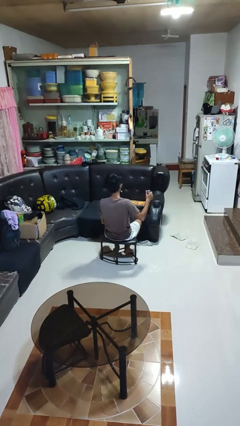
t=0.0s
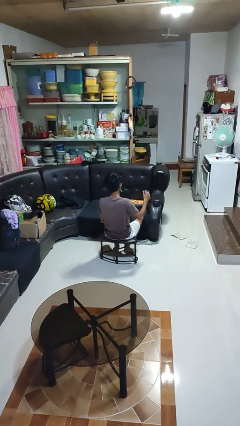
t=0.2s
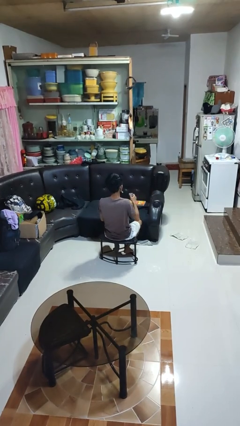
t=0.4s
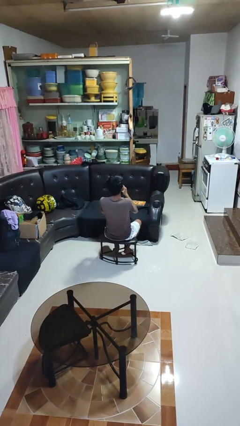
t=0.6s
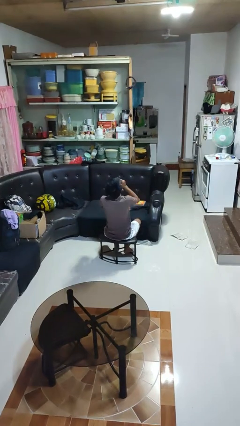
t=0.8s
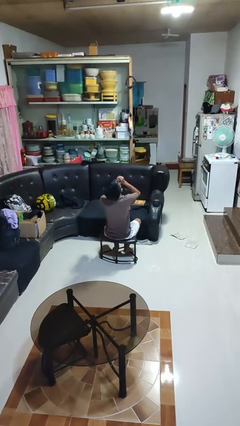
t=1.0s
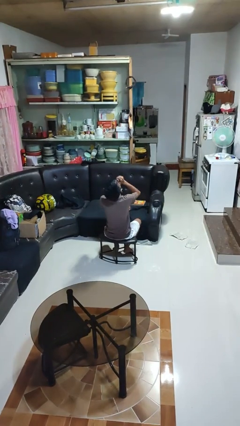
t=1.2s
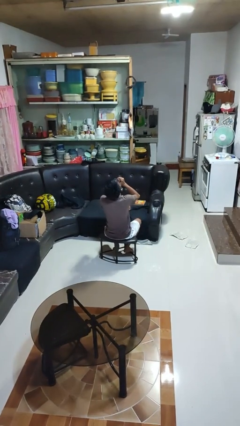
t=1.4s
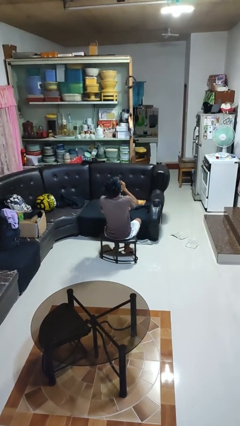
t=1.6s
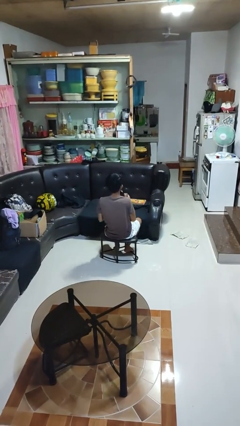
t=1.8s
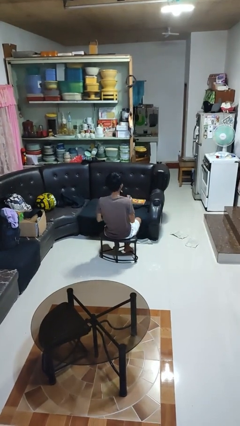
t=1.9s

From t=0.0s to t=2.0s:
person drinks from beverage can

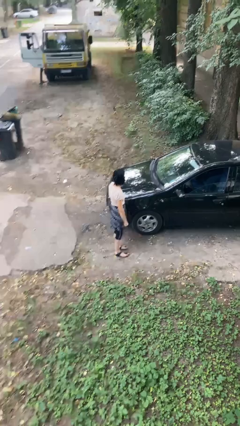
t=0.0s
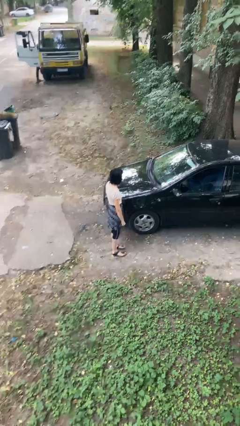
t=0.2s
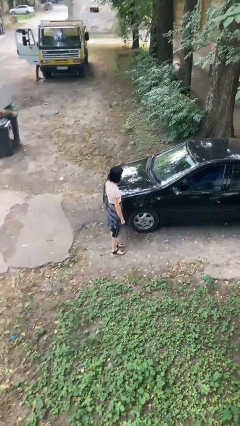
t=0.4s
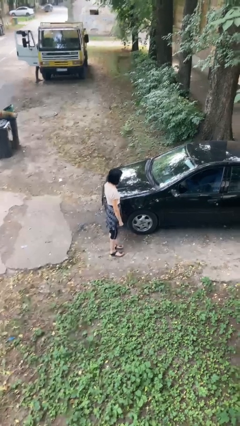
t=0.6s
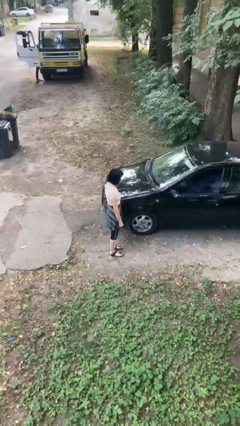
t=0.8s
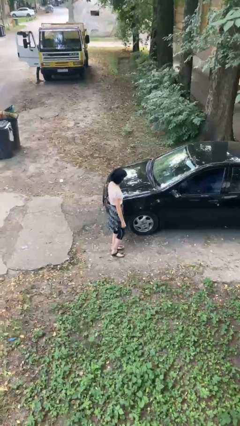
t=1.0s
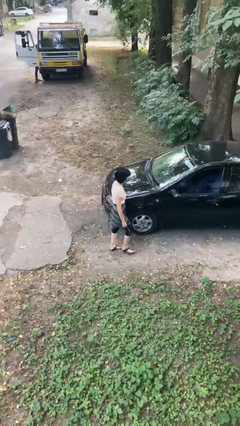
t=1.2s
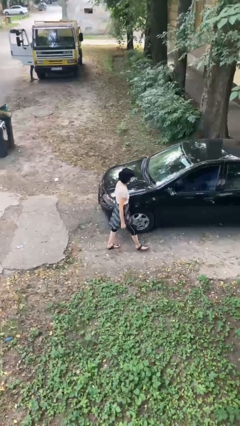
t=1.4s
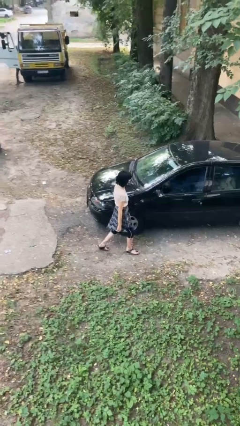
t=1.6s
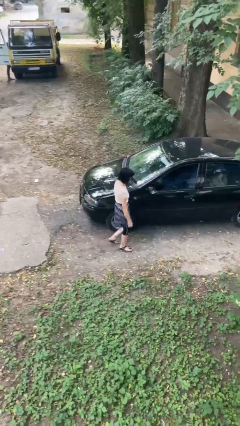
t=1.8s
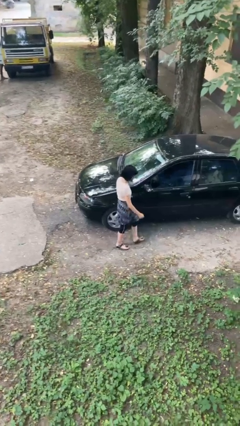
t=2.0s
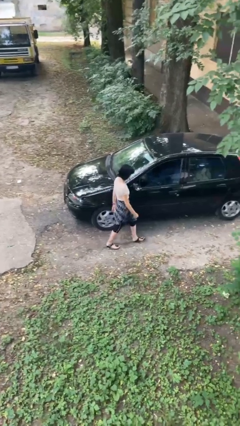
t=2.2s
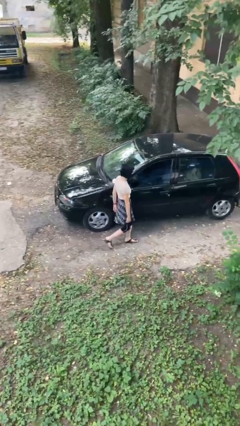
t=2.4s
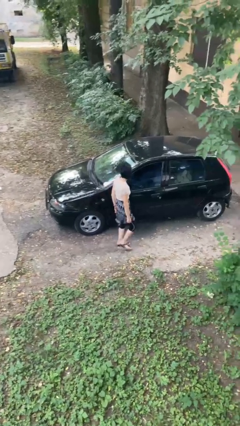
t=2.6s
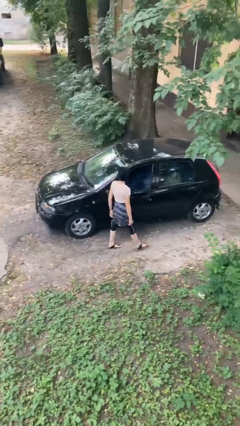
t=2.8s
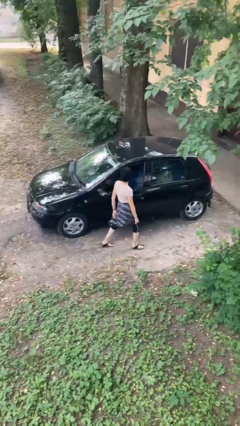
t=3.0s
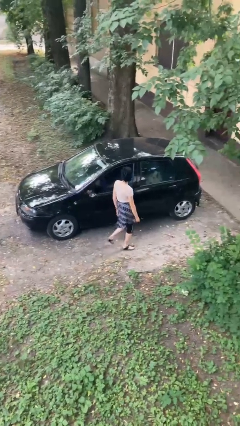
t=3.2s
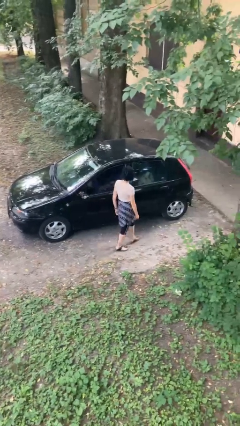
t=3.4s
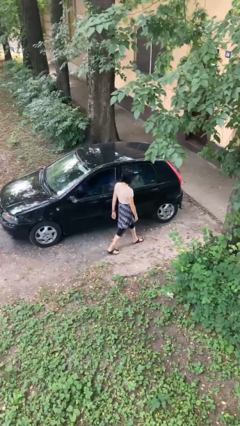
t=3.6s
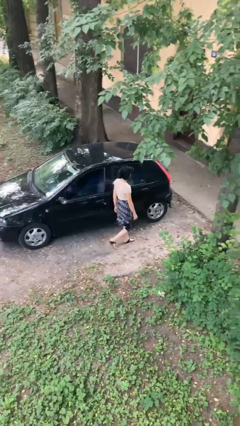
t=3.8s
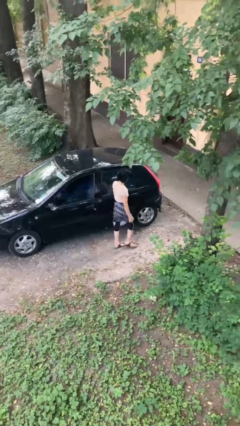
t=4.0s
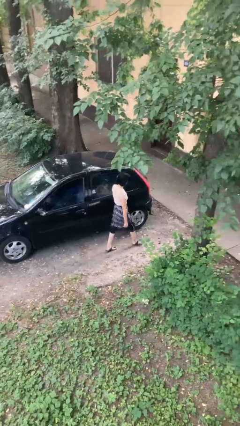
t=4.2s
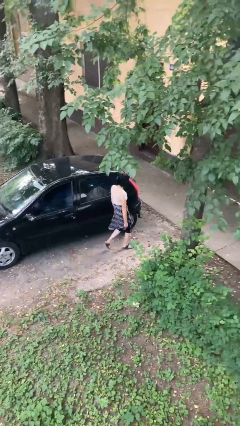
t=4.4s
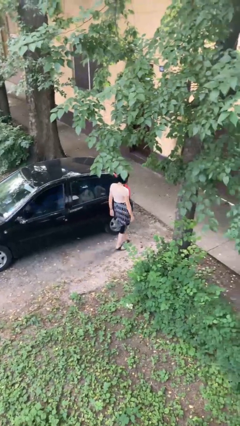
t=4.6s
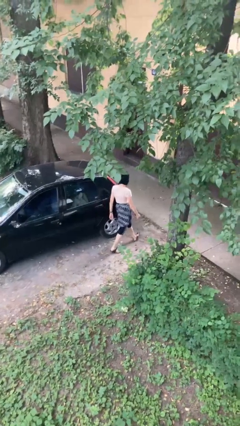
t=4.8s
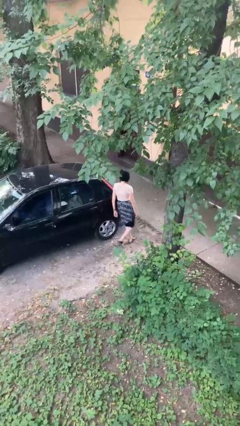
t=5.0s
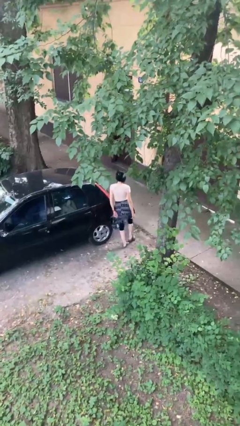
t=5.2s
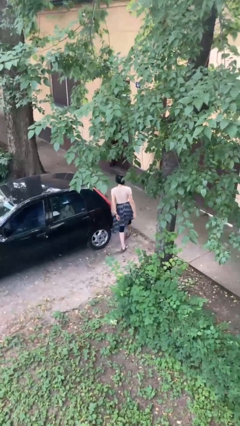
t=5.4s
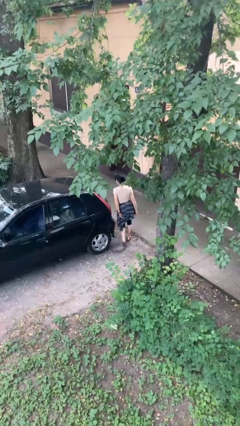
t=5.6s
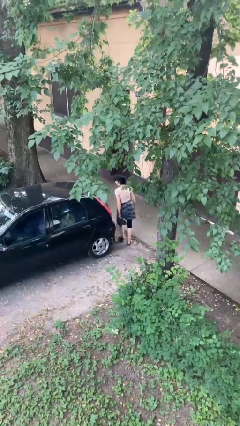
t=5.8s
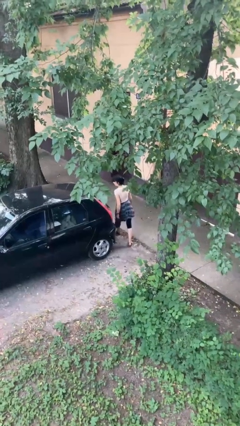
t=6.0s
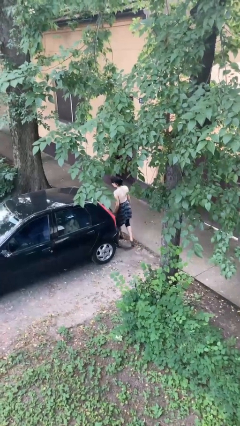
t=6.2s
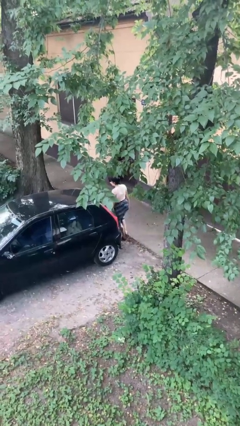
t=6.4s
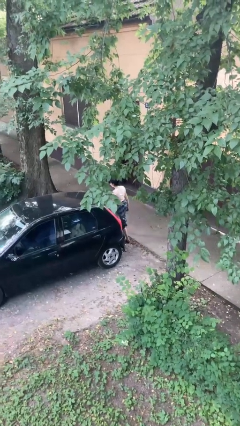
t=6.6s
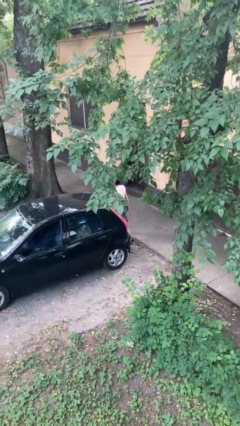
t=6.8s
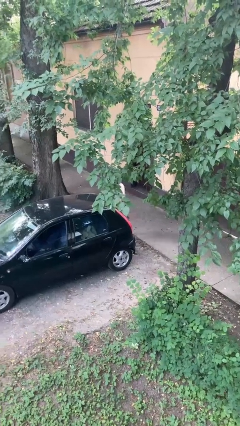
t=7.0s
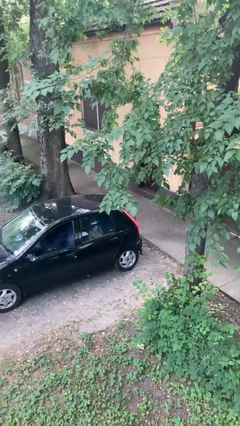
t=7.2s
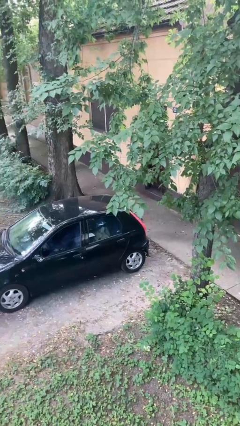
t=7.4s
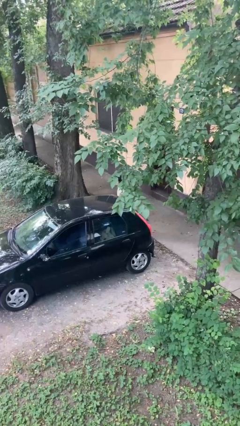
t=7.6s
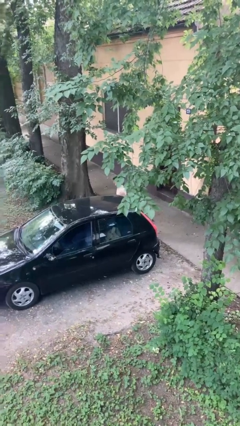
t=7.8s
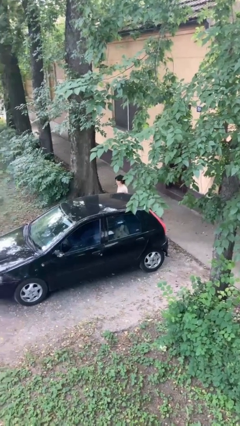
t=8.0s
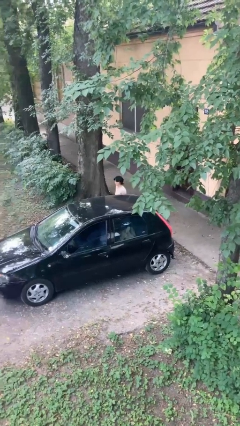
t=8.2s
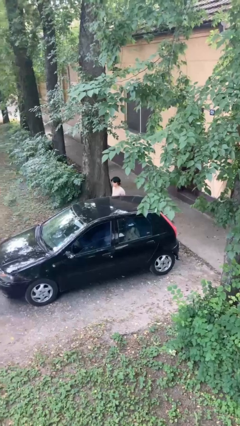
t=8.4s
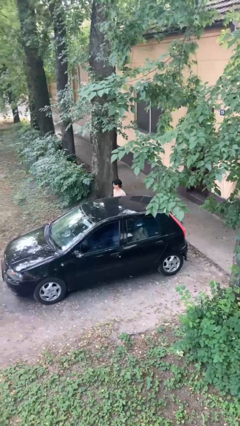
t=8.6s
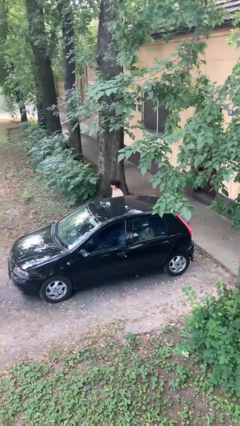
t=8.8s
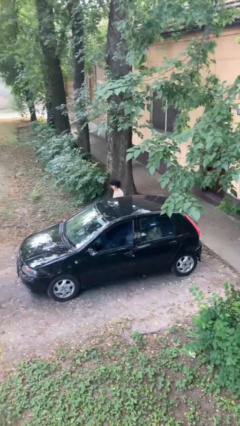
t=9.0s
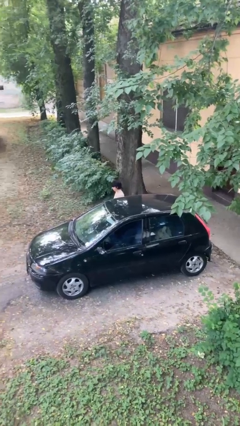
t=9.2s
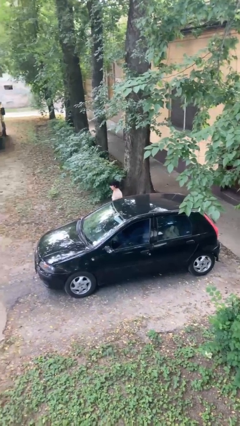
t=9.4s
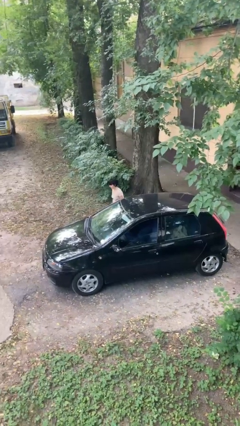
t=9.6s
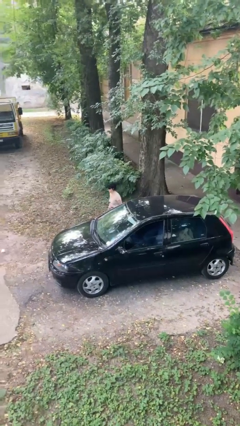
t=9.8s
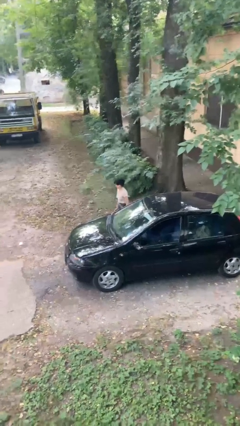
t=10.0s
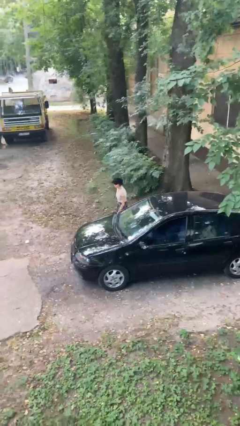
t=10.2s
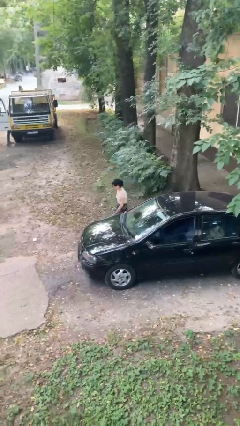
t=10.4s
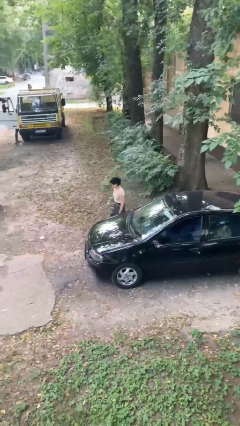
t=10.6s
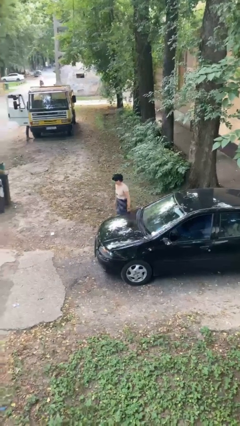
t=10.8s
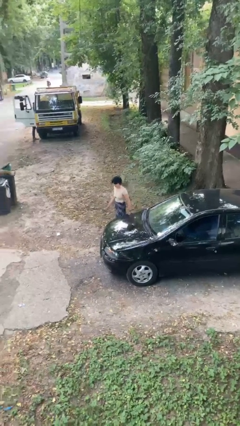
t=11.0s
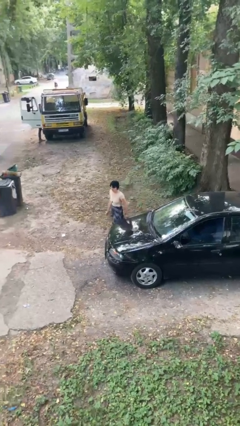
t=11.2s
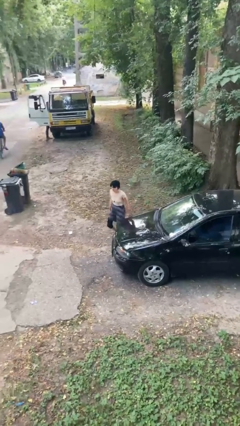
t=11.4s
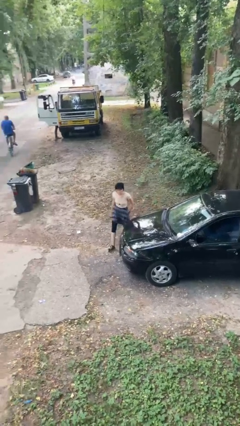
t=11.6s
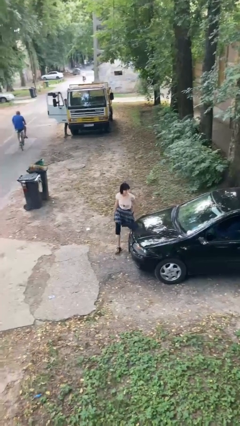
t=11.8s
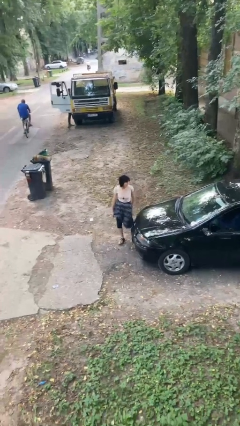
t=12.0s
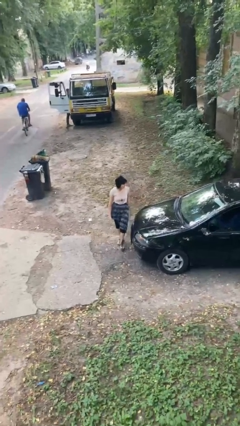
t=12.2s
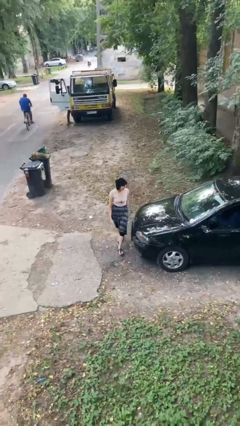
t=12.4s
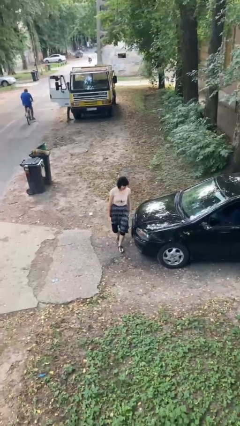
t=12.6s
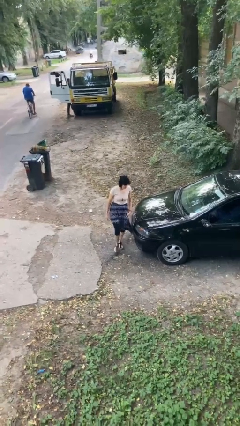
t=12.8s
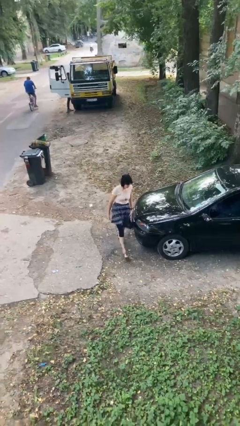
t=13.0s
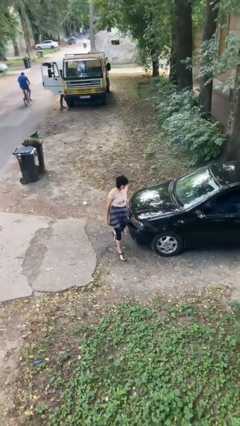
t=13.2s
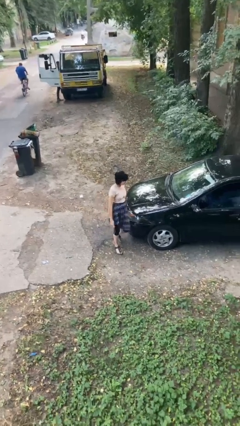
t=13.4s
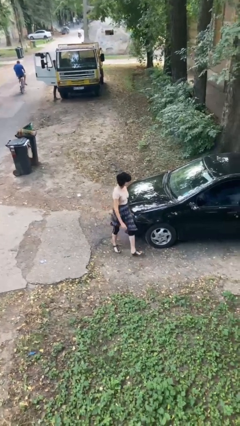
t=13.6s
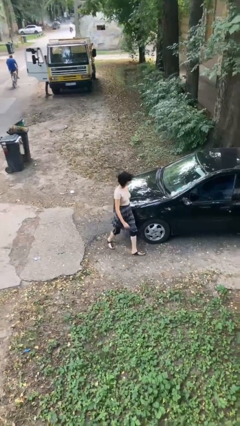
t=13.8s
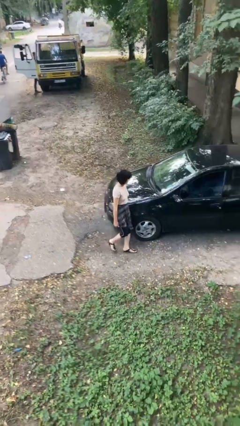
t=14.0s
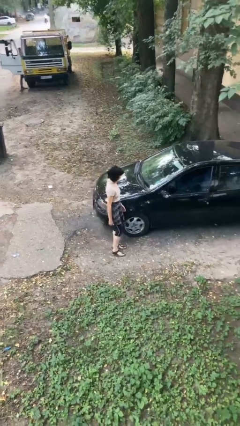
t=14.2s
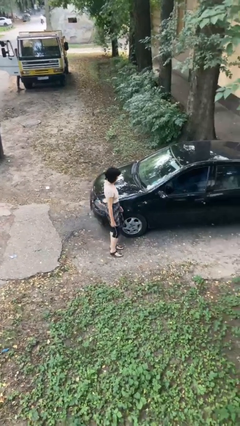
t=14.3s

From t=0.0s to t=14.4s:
person walks around car

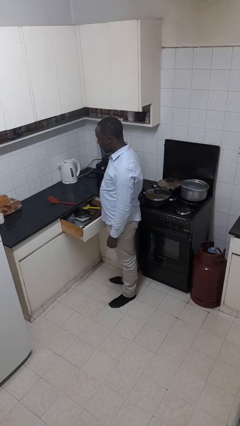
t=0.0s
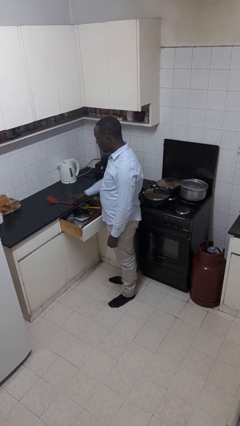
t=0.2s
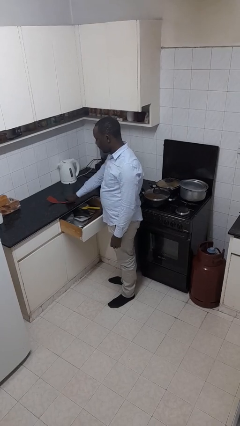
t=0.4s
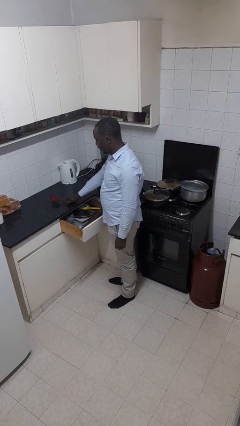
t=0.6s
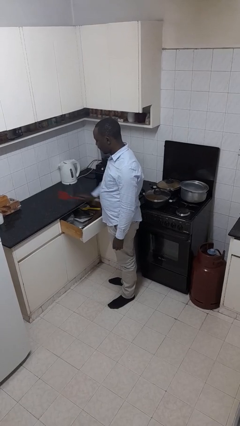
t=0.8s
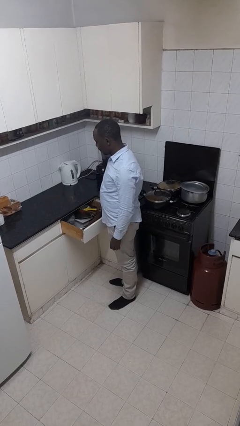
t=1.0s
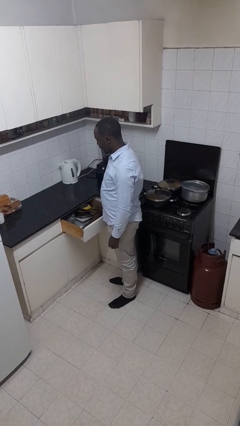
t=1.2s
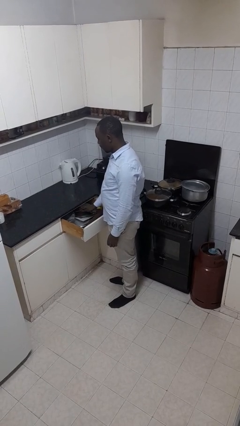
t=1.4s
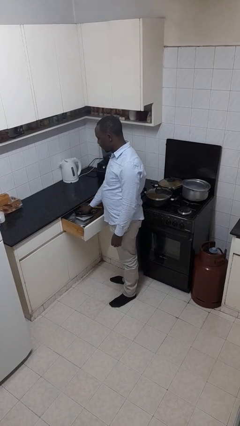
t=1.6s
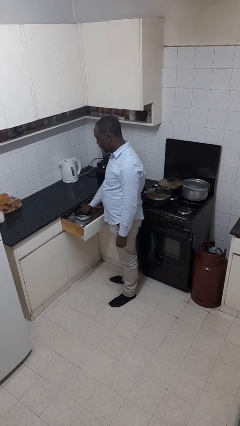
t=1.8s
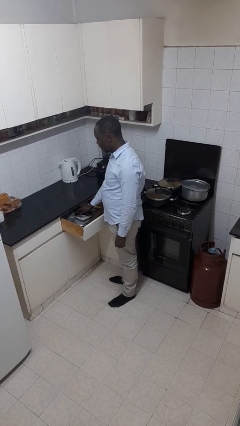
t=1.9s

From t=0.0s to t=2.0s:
person puts object into kitchen drawer
